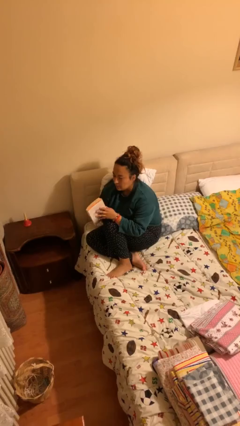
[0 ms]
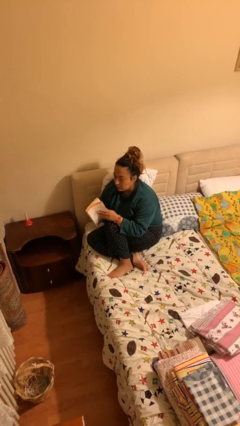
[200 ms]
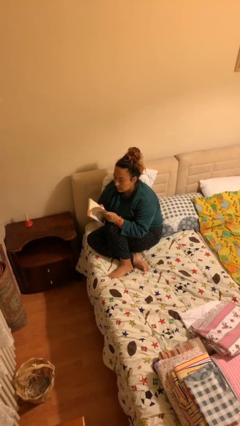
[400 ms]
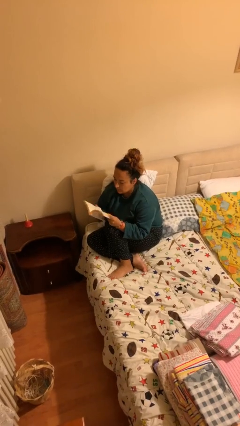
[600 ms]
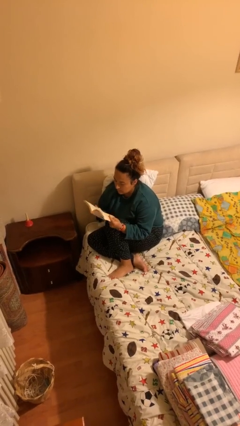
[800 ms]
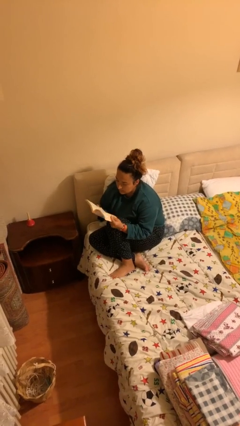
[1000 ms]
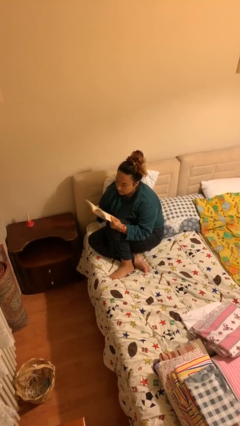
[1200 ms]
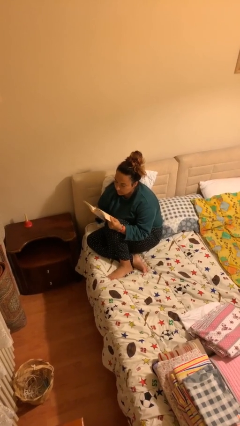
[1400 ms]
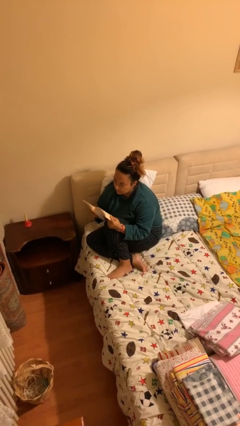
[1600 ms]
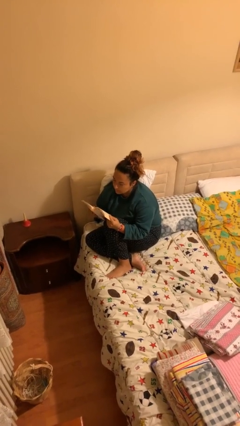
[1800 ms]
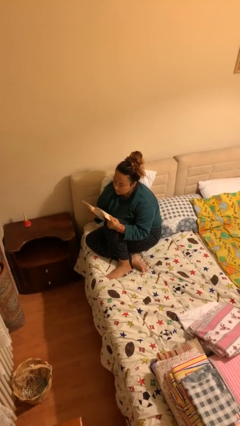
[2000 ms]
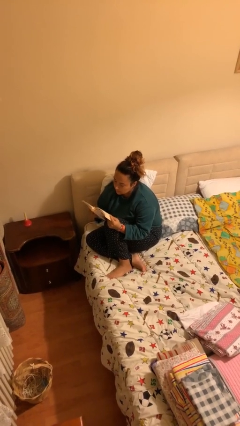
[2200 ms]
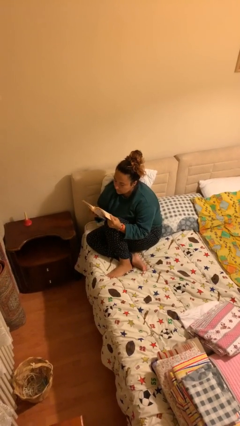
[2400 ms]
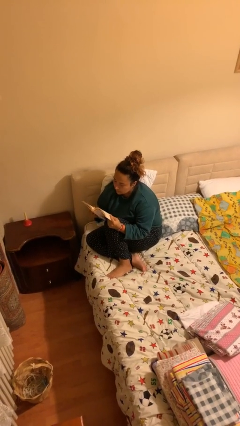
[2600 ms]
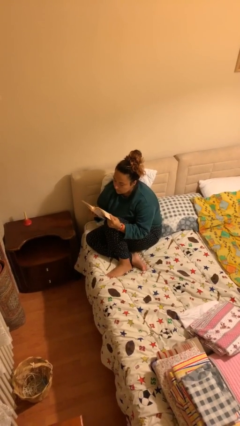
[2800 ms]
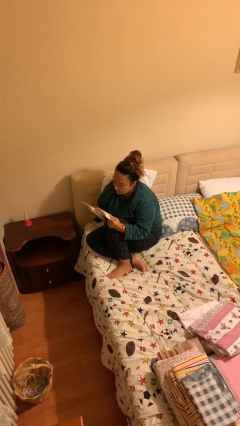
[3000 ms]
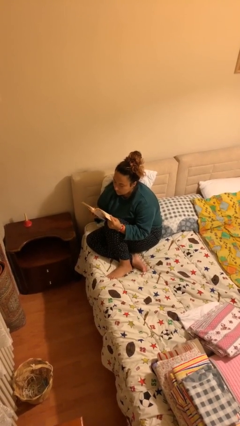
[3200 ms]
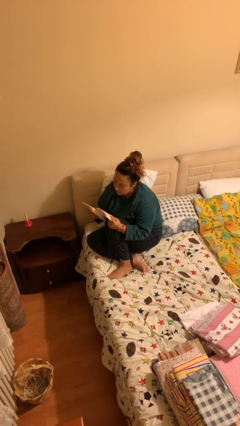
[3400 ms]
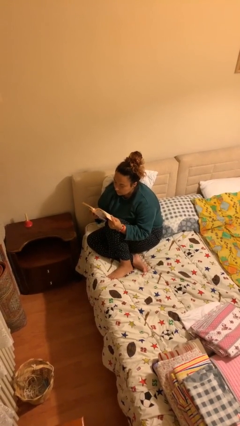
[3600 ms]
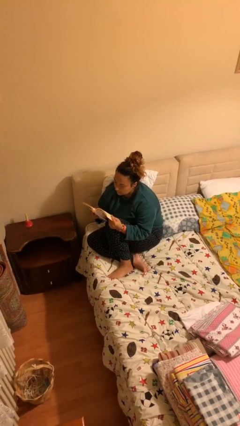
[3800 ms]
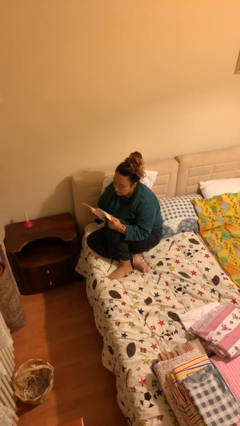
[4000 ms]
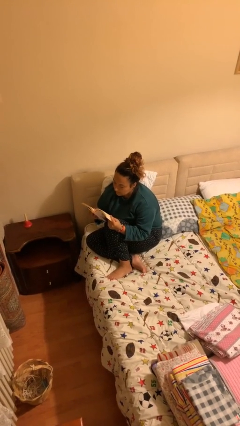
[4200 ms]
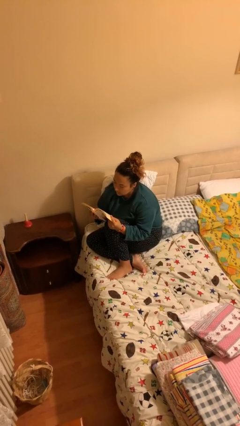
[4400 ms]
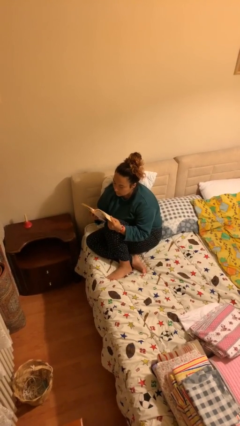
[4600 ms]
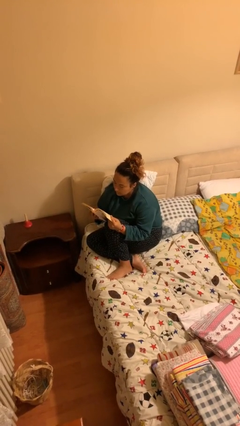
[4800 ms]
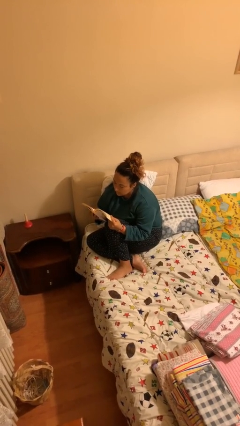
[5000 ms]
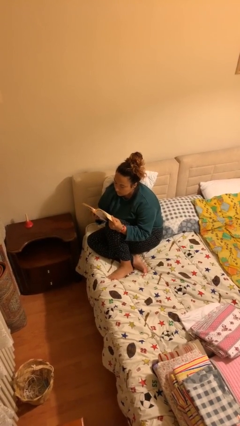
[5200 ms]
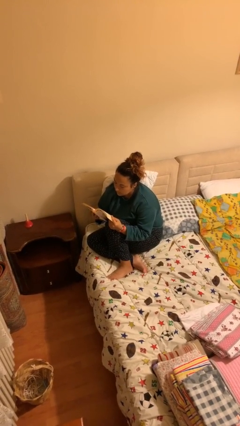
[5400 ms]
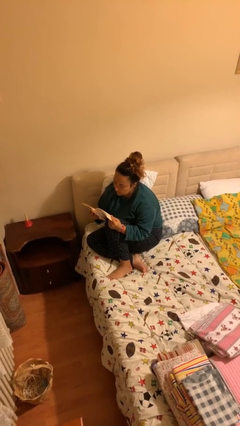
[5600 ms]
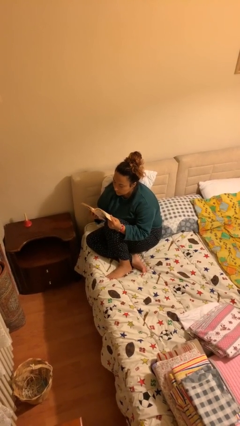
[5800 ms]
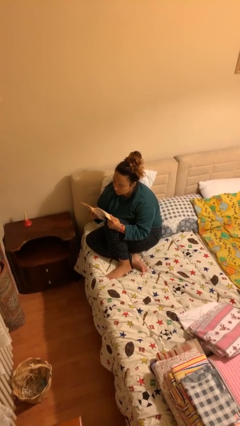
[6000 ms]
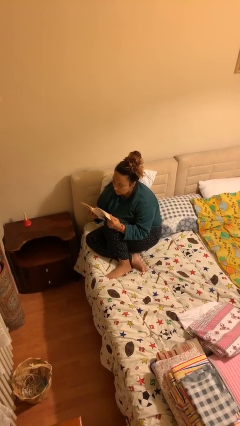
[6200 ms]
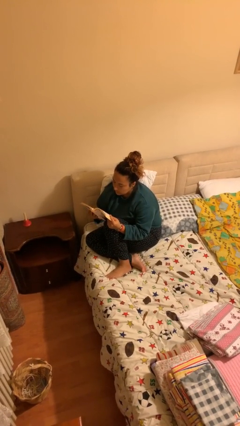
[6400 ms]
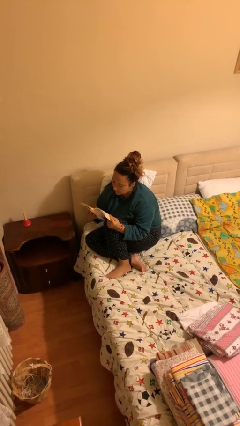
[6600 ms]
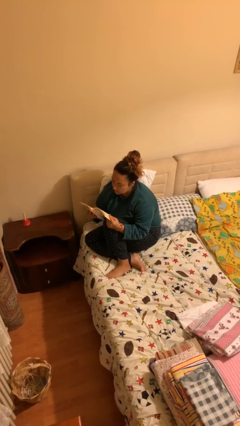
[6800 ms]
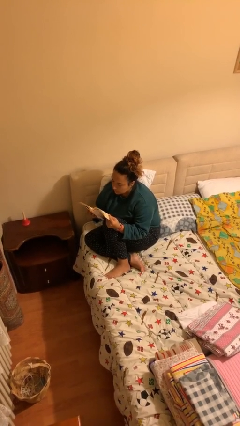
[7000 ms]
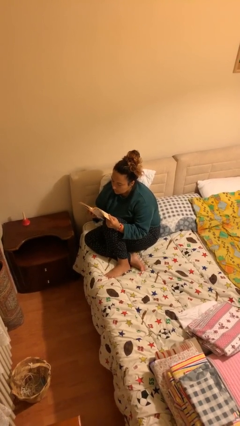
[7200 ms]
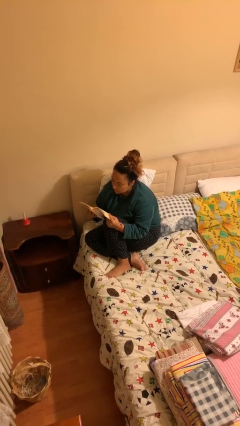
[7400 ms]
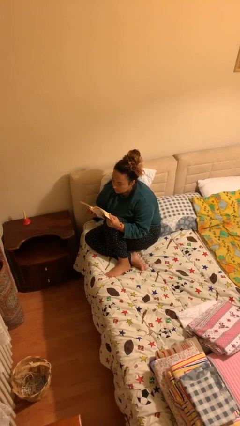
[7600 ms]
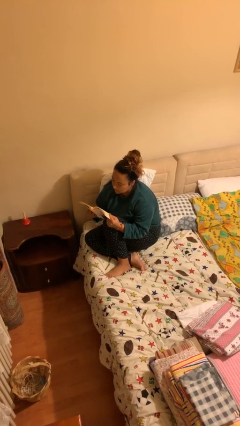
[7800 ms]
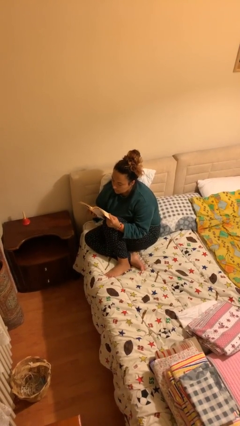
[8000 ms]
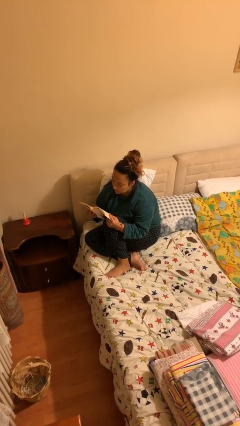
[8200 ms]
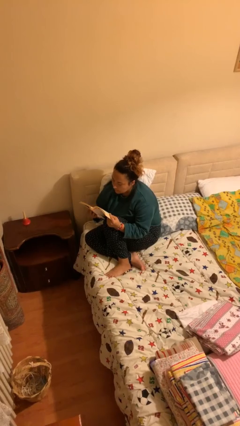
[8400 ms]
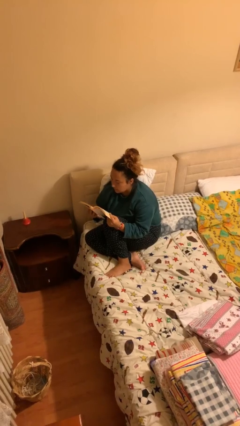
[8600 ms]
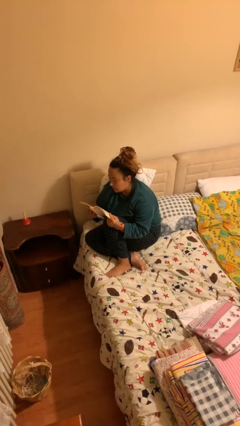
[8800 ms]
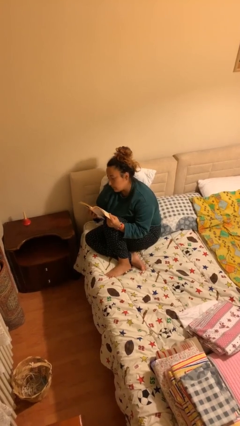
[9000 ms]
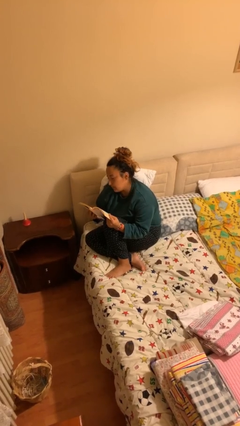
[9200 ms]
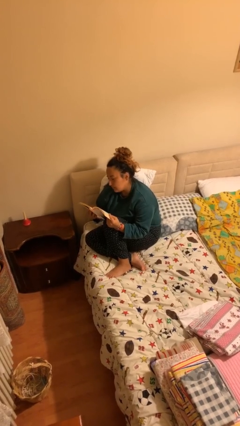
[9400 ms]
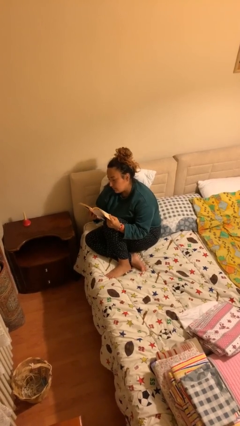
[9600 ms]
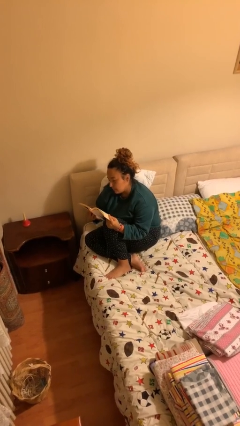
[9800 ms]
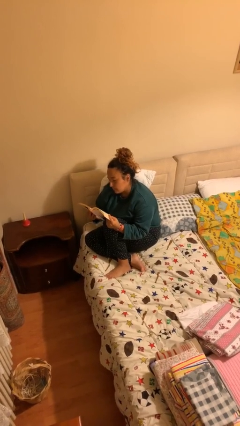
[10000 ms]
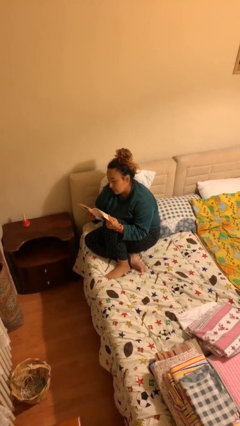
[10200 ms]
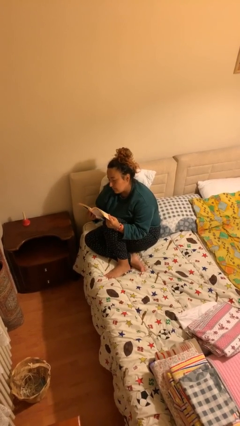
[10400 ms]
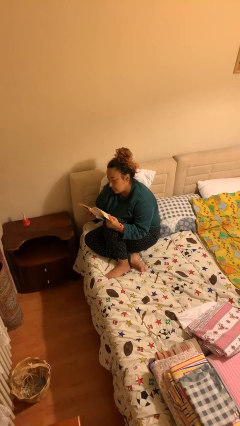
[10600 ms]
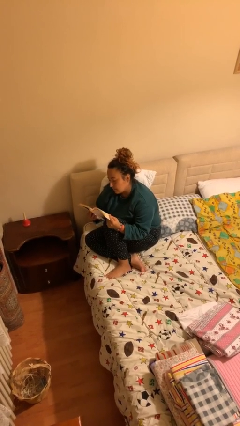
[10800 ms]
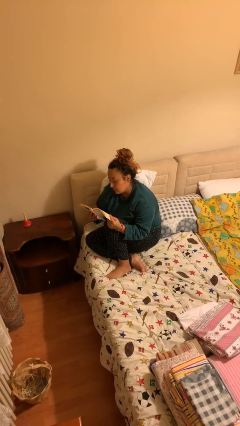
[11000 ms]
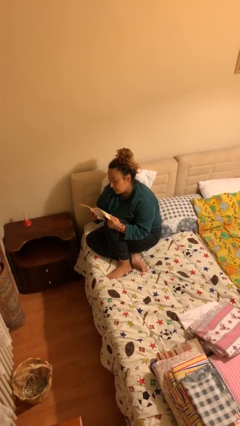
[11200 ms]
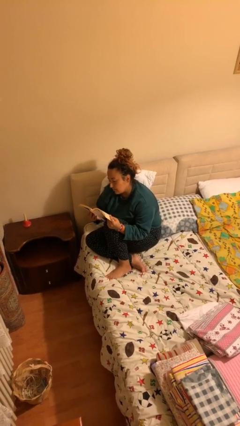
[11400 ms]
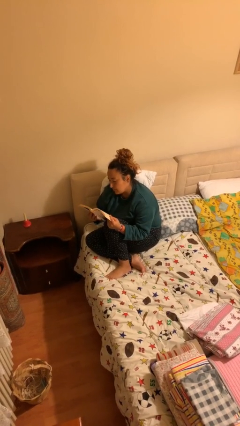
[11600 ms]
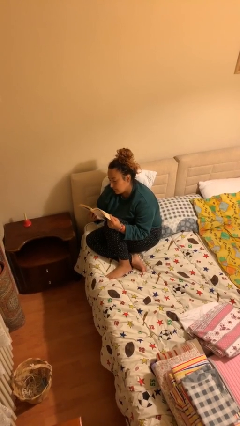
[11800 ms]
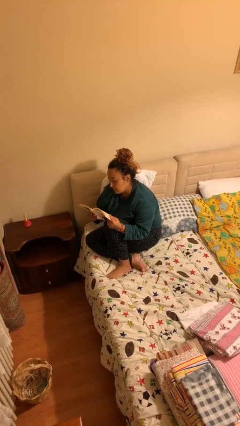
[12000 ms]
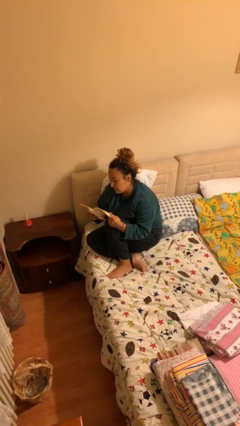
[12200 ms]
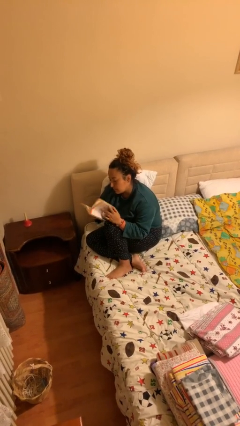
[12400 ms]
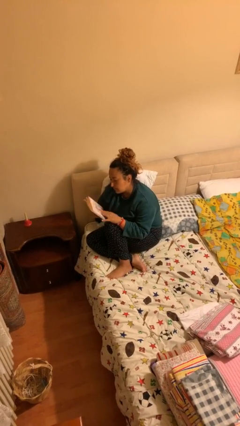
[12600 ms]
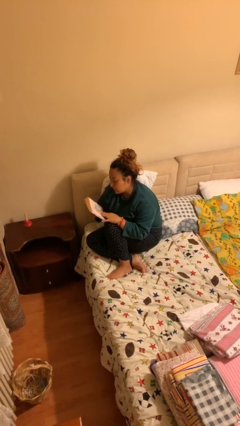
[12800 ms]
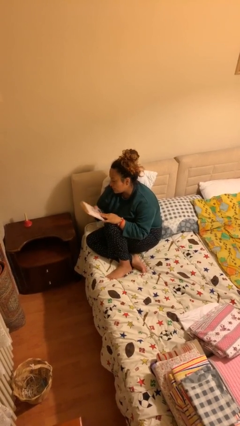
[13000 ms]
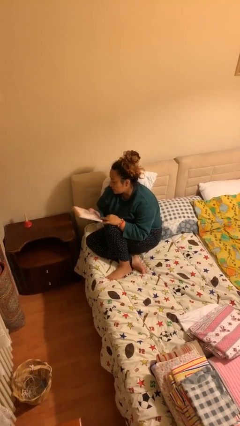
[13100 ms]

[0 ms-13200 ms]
person reads document

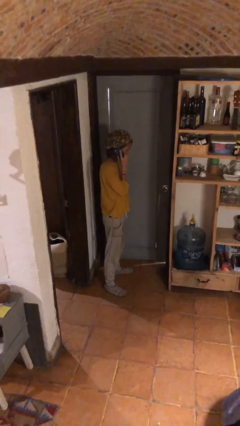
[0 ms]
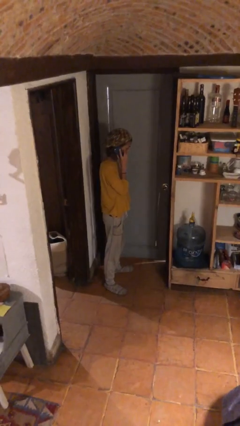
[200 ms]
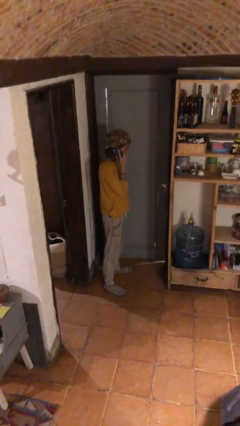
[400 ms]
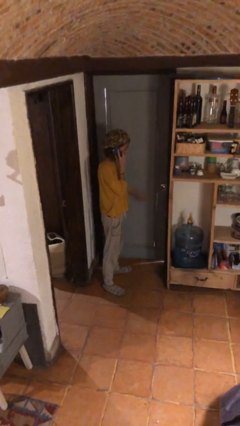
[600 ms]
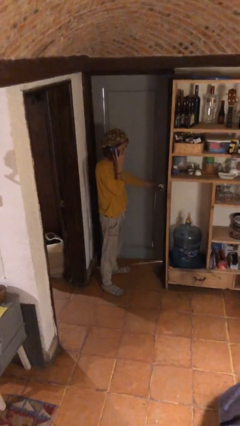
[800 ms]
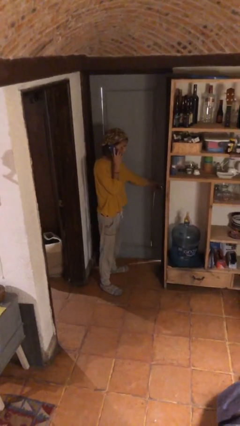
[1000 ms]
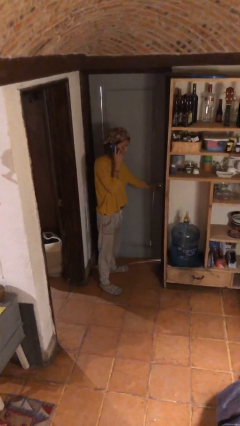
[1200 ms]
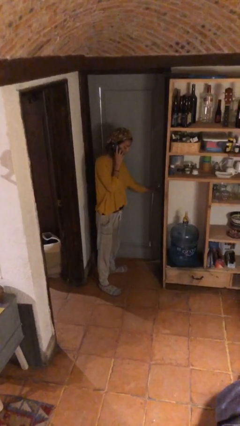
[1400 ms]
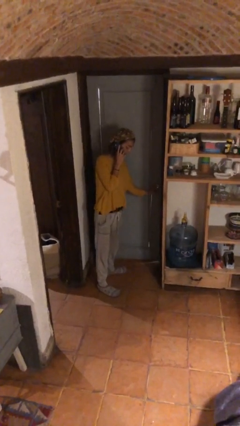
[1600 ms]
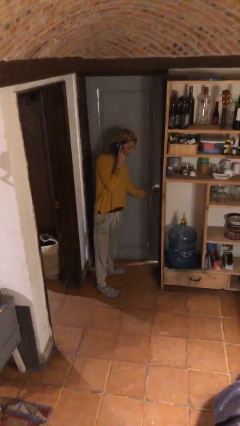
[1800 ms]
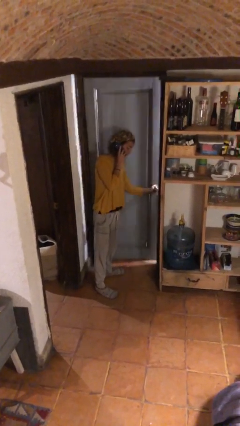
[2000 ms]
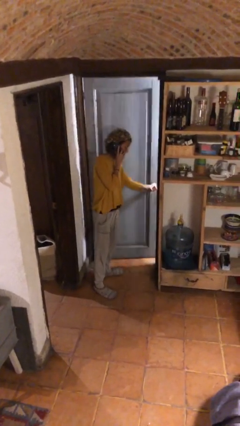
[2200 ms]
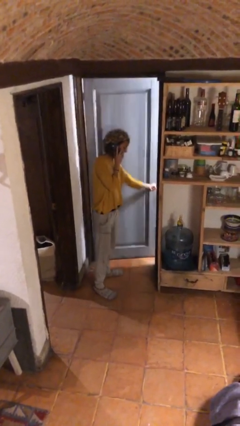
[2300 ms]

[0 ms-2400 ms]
person opens facility door

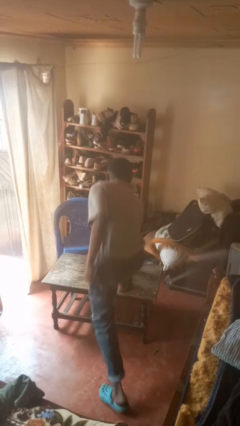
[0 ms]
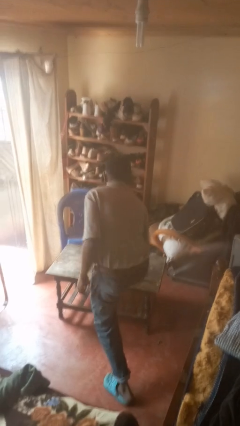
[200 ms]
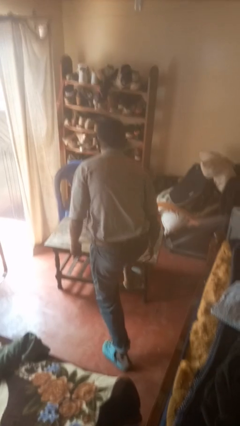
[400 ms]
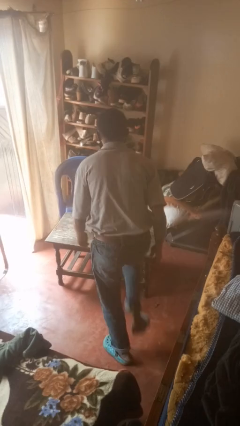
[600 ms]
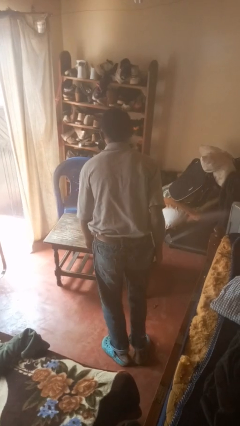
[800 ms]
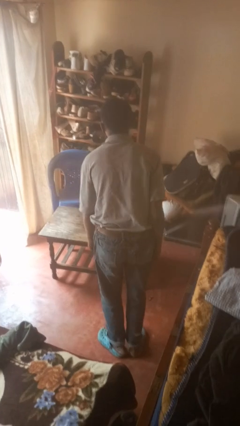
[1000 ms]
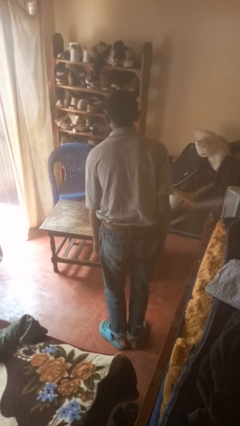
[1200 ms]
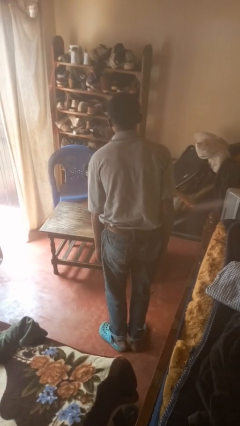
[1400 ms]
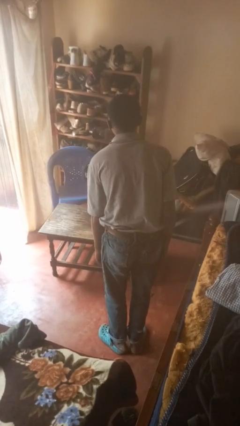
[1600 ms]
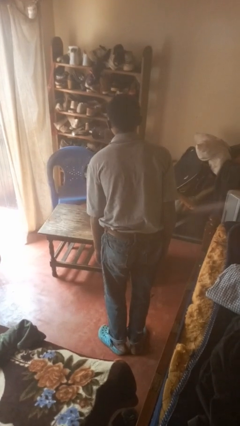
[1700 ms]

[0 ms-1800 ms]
person climbs off table

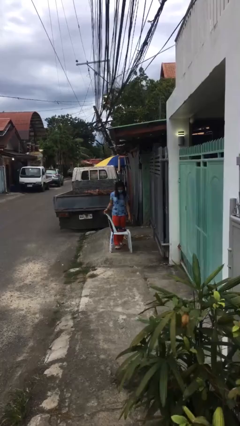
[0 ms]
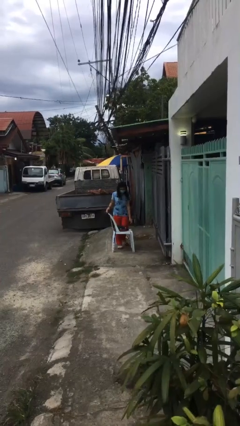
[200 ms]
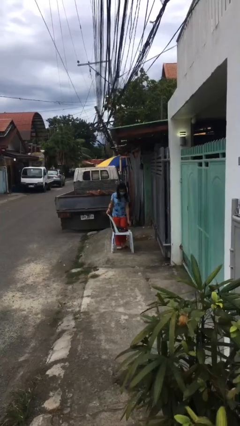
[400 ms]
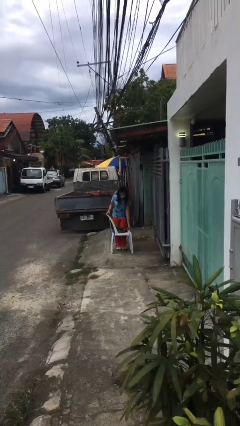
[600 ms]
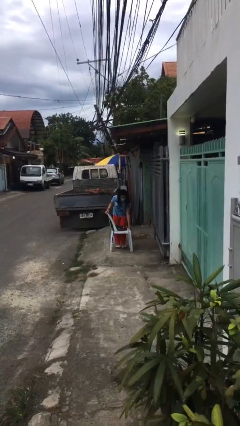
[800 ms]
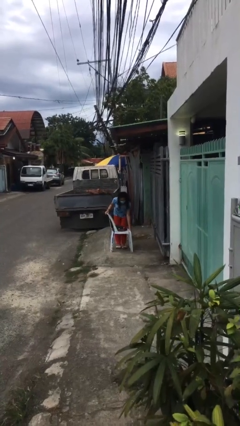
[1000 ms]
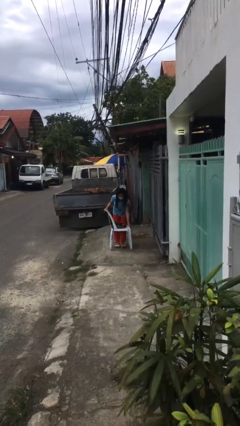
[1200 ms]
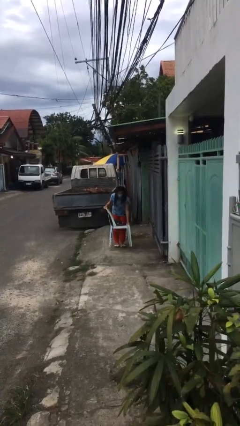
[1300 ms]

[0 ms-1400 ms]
person picks up object from floor
